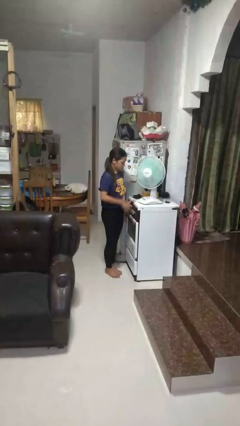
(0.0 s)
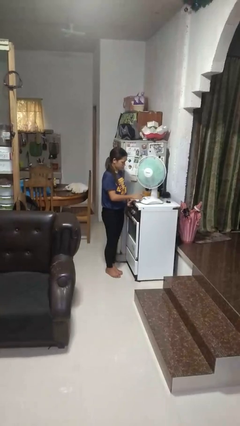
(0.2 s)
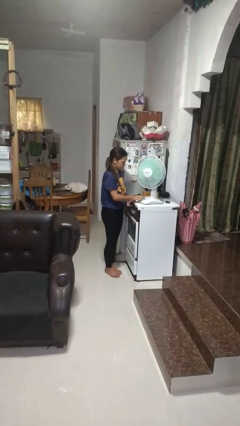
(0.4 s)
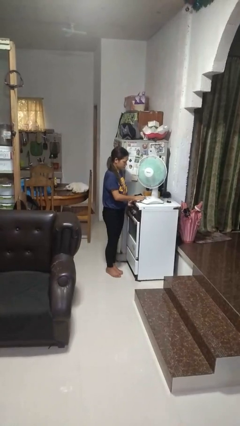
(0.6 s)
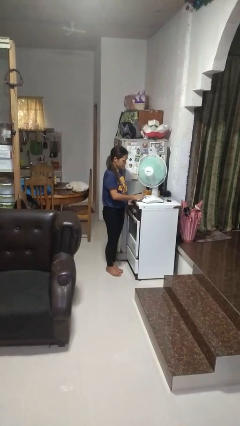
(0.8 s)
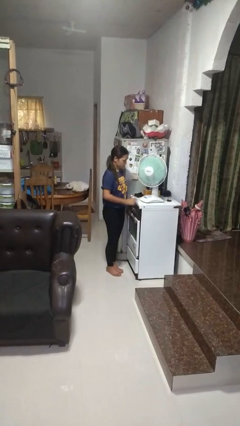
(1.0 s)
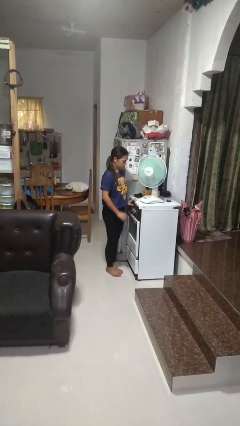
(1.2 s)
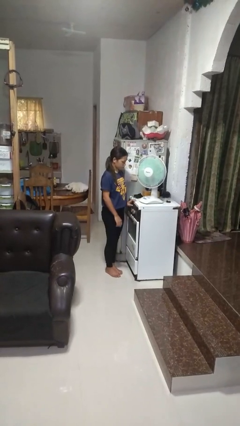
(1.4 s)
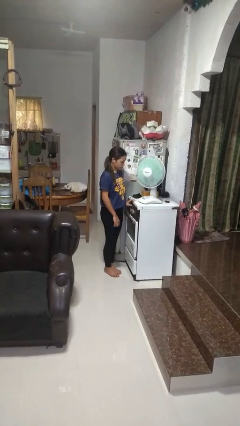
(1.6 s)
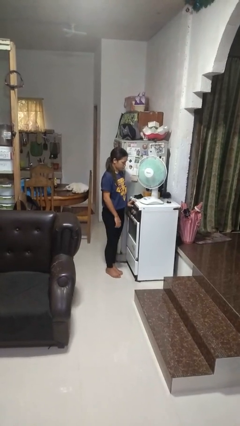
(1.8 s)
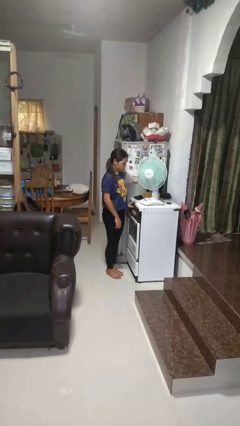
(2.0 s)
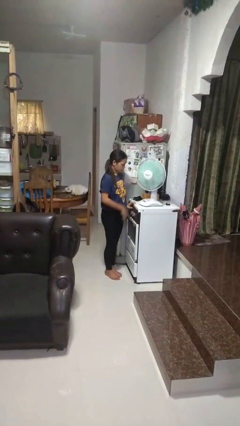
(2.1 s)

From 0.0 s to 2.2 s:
person turns on fan

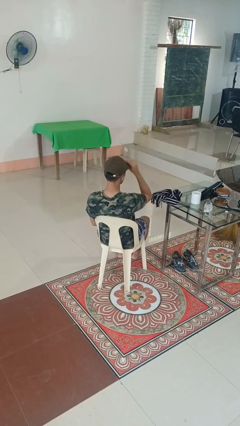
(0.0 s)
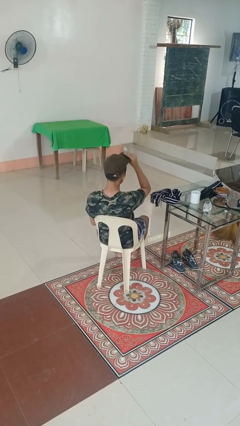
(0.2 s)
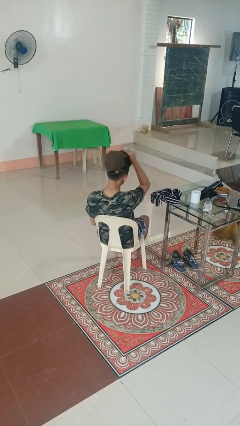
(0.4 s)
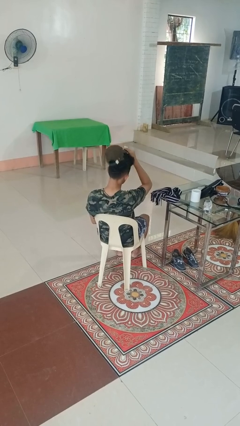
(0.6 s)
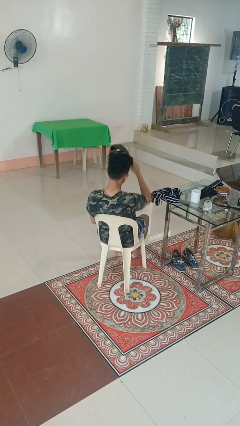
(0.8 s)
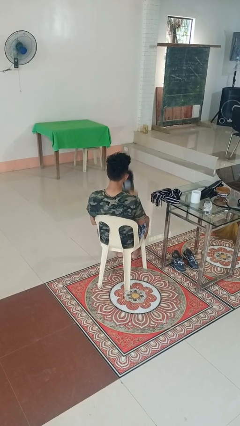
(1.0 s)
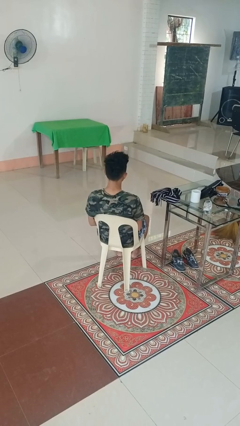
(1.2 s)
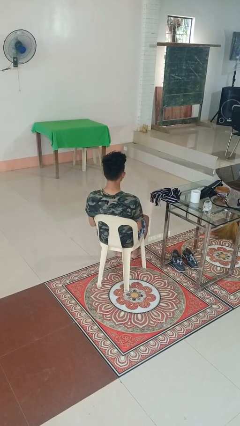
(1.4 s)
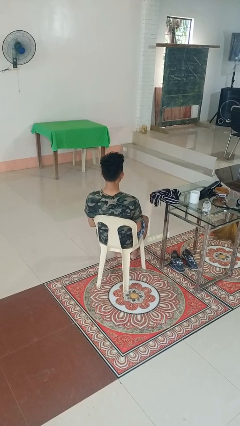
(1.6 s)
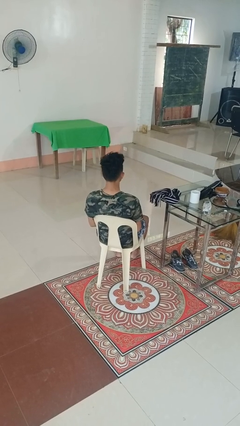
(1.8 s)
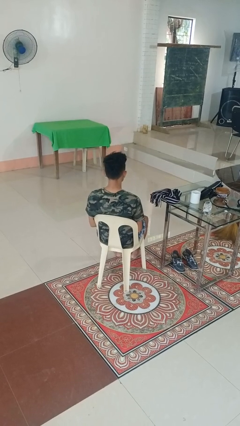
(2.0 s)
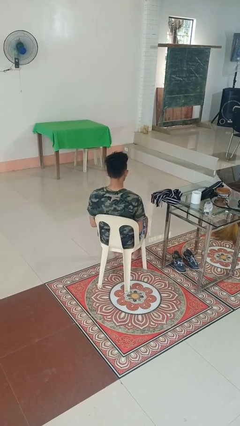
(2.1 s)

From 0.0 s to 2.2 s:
person takes off hat

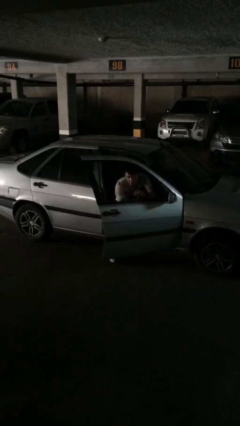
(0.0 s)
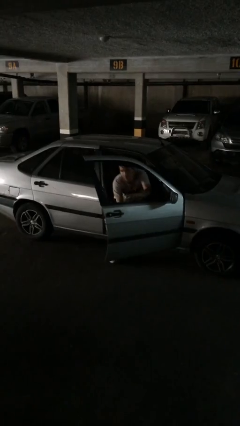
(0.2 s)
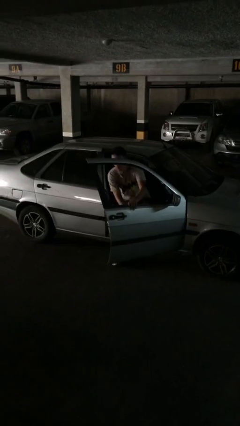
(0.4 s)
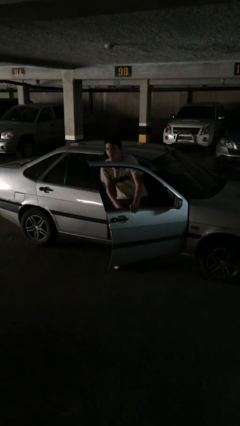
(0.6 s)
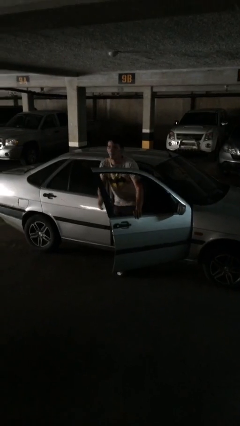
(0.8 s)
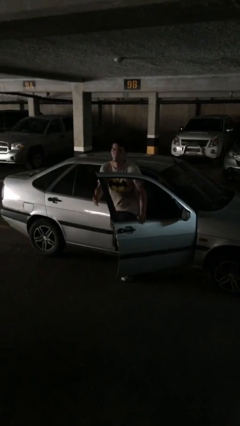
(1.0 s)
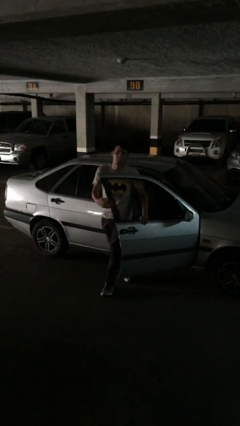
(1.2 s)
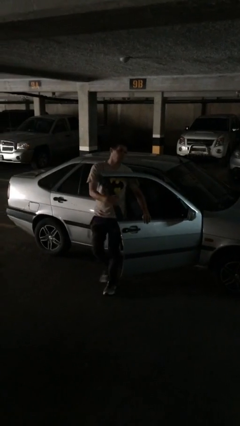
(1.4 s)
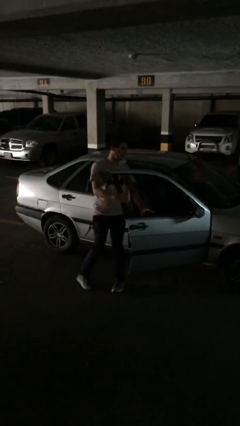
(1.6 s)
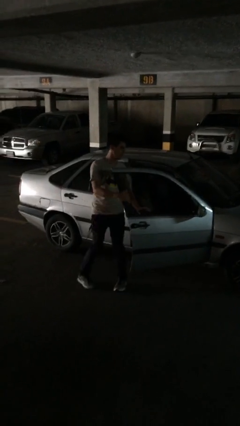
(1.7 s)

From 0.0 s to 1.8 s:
person exits car

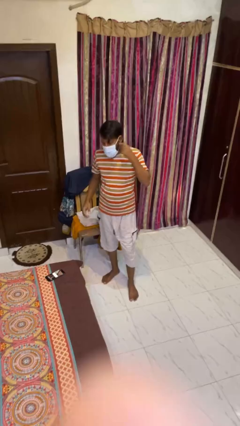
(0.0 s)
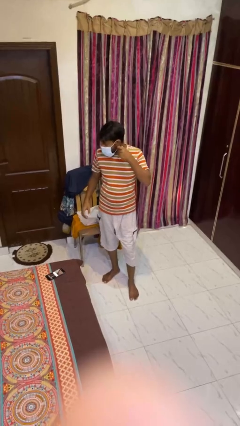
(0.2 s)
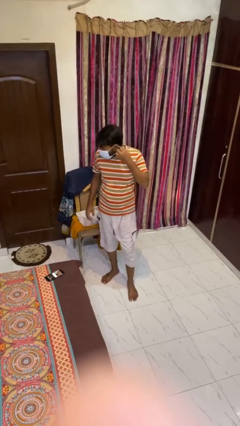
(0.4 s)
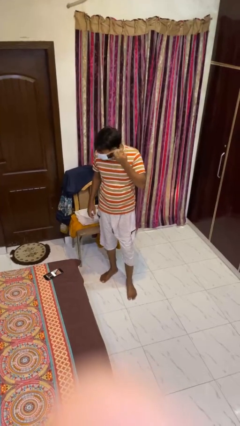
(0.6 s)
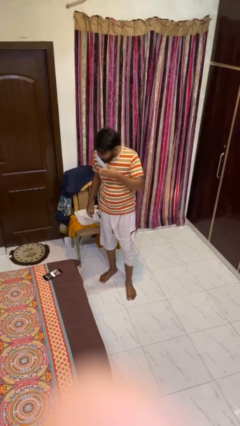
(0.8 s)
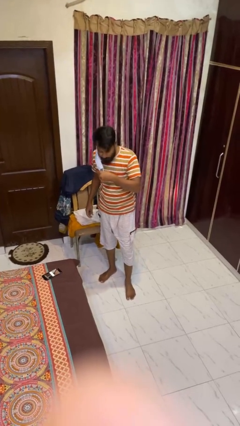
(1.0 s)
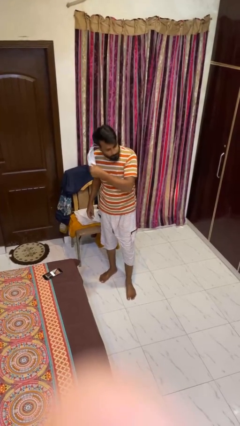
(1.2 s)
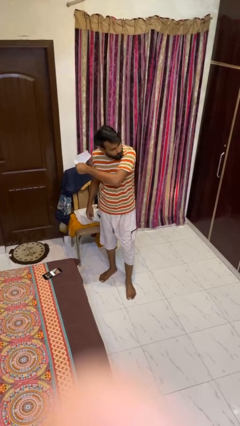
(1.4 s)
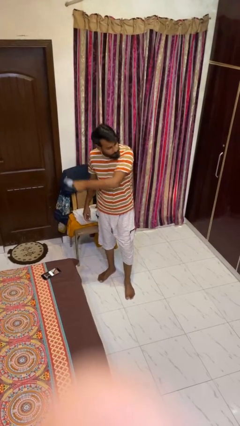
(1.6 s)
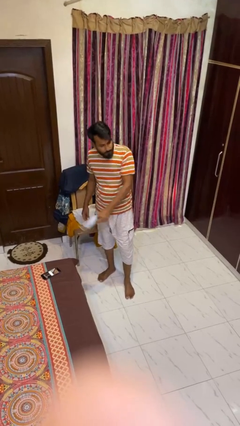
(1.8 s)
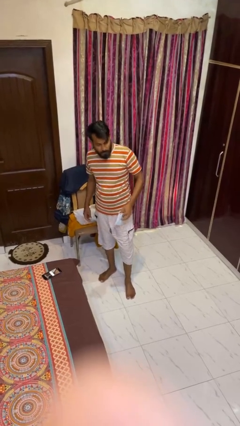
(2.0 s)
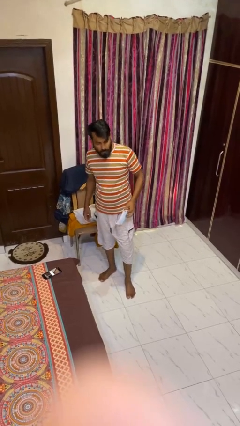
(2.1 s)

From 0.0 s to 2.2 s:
person takes off facemask

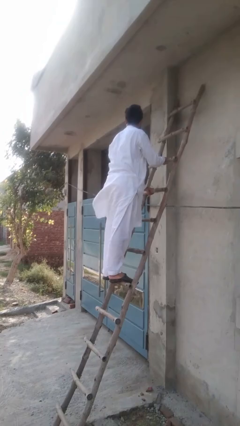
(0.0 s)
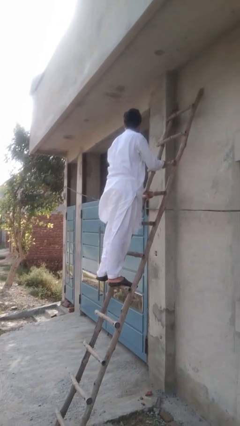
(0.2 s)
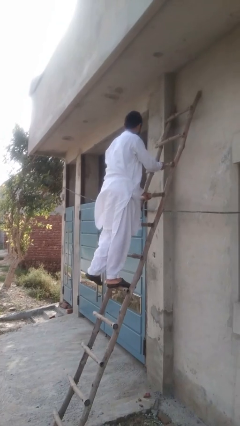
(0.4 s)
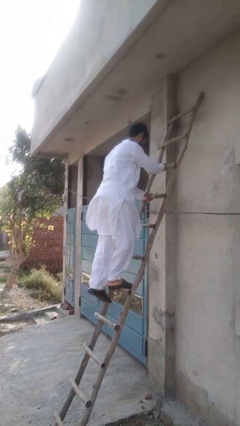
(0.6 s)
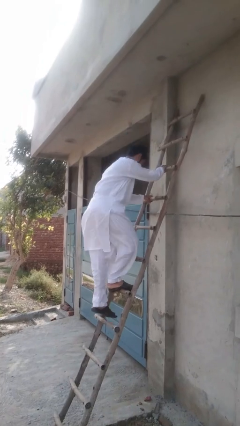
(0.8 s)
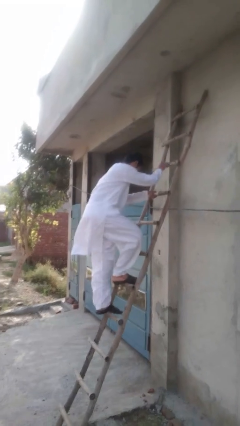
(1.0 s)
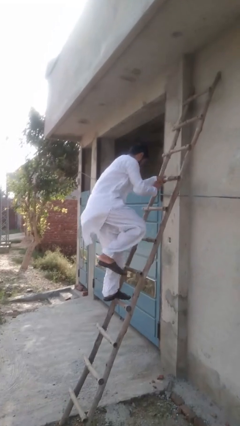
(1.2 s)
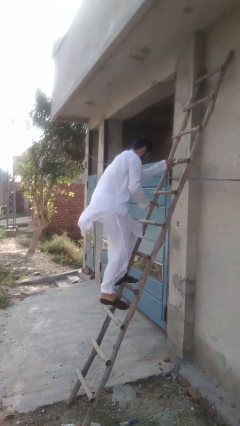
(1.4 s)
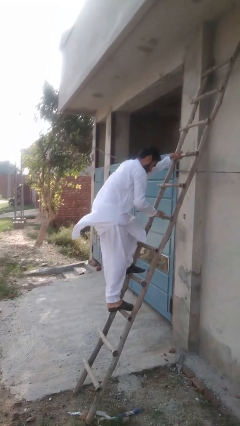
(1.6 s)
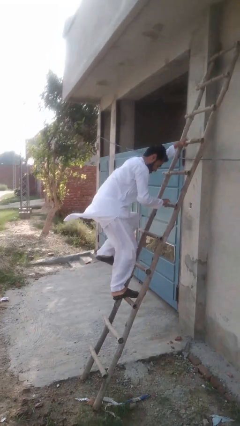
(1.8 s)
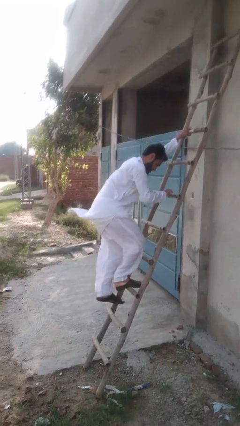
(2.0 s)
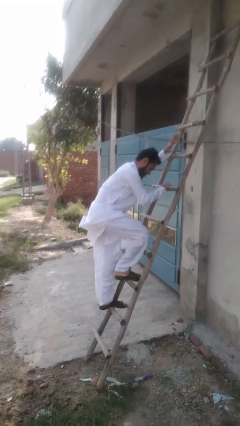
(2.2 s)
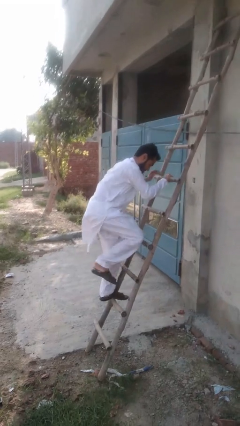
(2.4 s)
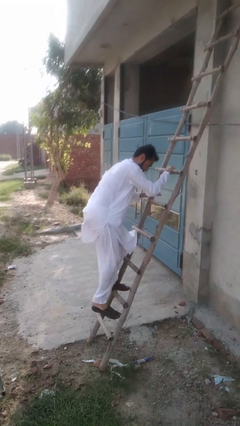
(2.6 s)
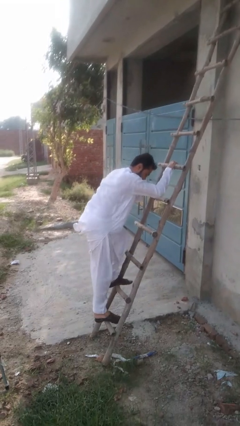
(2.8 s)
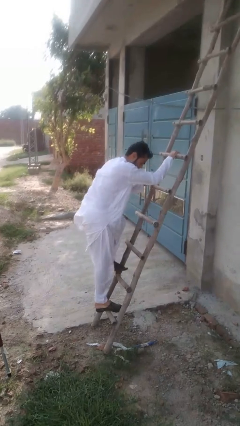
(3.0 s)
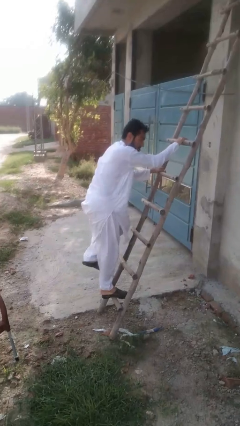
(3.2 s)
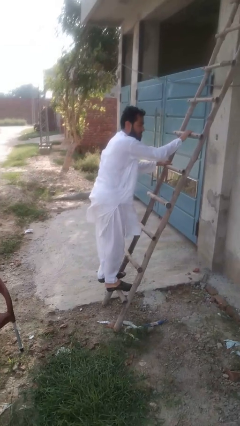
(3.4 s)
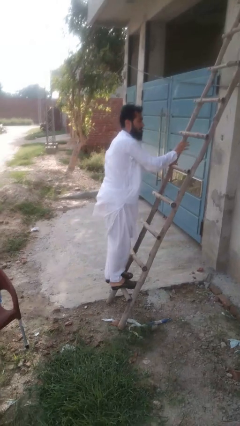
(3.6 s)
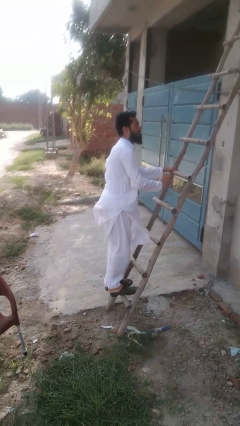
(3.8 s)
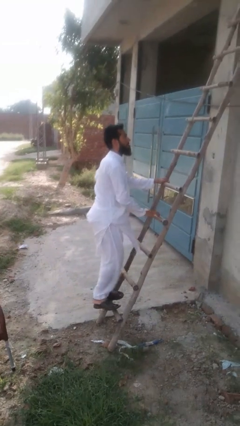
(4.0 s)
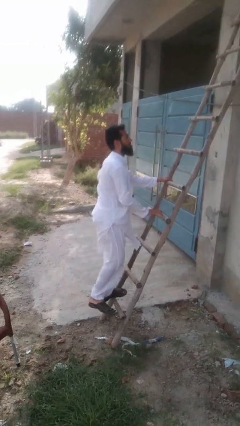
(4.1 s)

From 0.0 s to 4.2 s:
person climbs down stairs

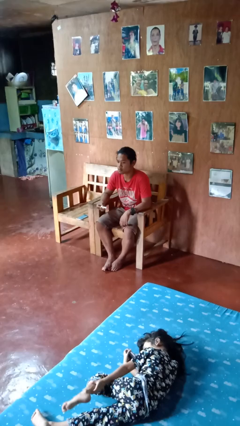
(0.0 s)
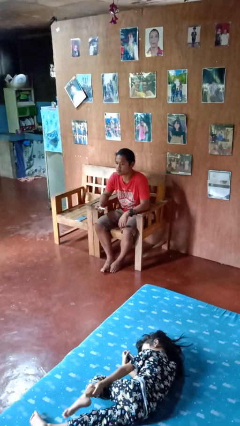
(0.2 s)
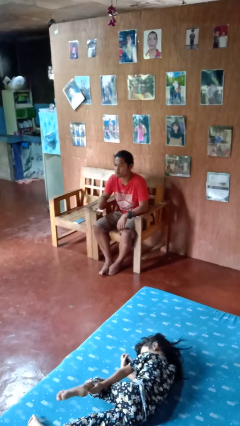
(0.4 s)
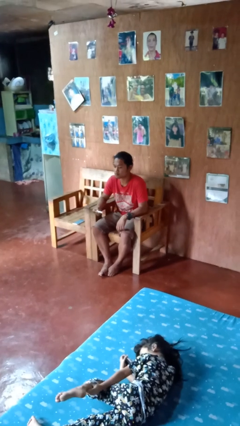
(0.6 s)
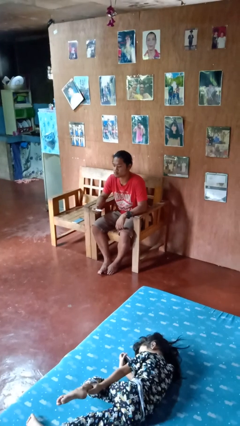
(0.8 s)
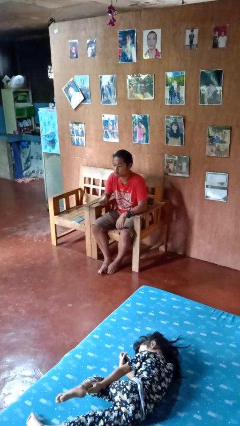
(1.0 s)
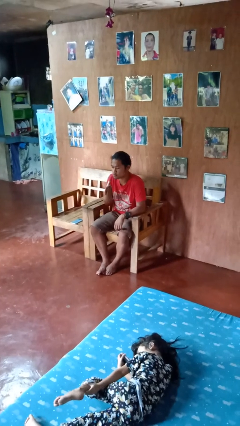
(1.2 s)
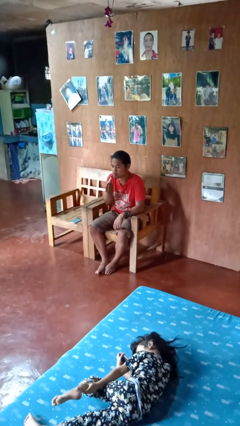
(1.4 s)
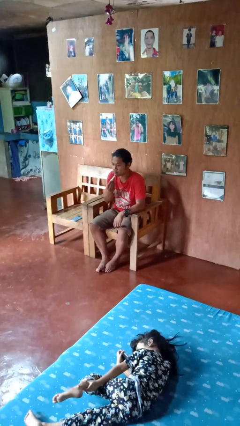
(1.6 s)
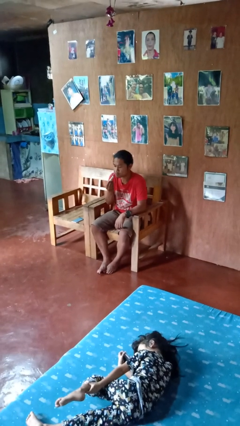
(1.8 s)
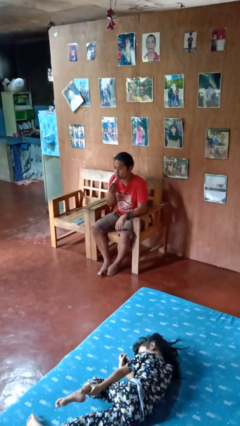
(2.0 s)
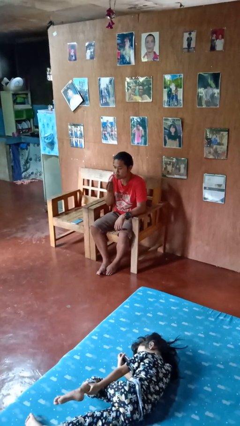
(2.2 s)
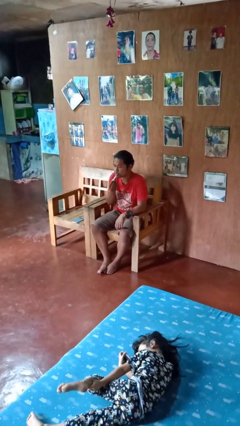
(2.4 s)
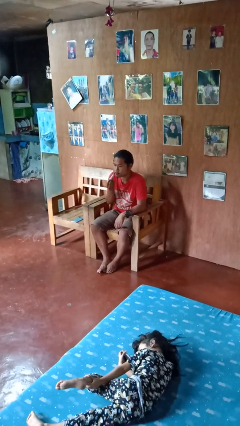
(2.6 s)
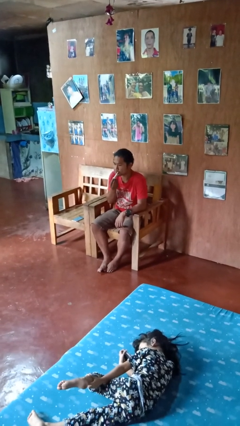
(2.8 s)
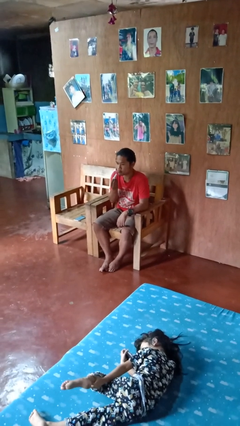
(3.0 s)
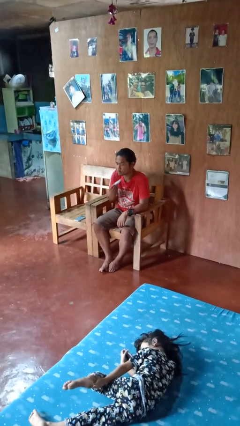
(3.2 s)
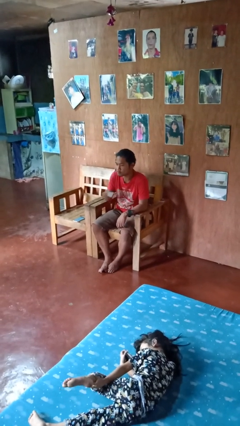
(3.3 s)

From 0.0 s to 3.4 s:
person applies lip makeup

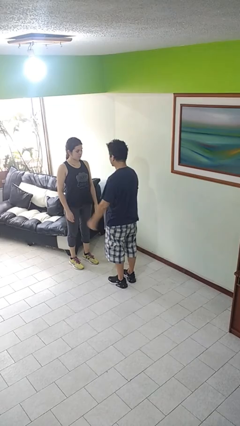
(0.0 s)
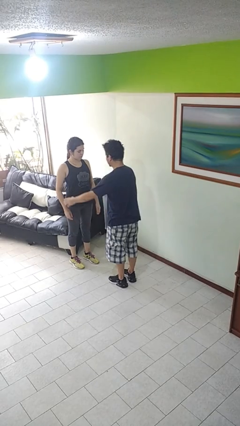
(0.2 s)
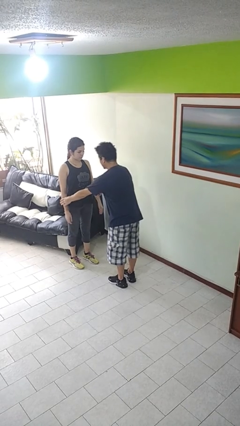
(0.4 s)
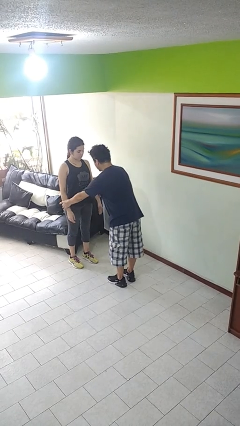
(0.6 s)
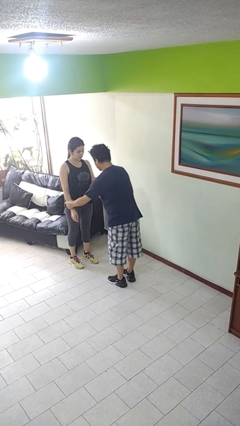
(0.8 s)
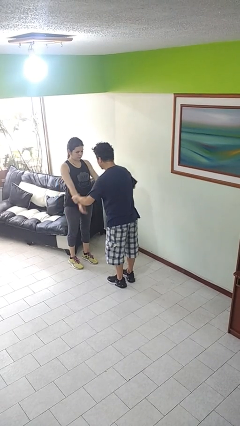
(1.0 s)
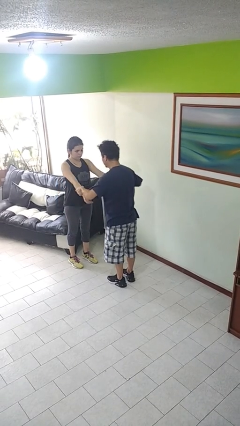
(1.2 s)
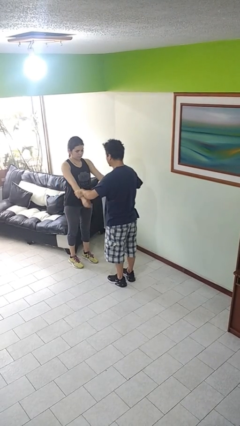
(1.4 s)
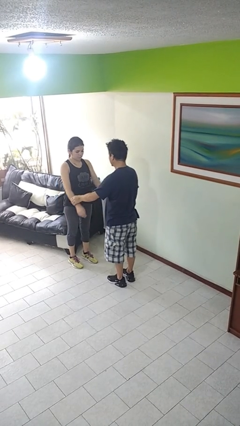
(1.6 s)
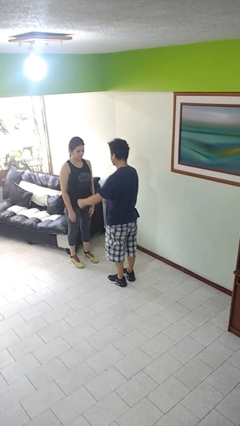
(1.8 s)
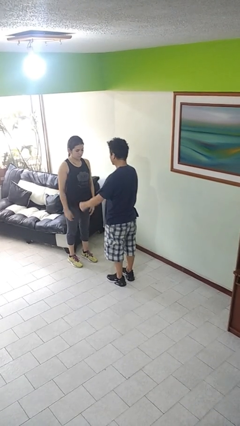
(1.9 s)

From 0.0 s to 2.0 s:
person grabs person by forearm
